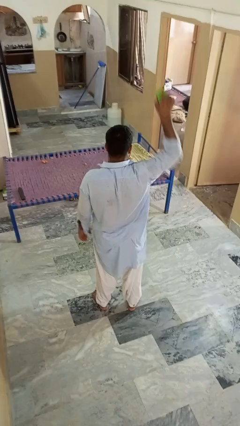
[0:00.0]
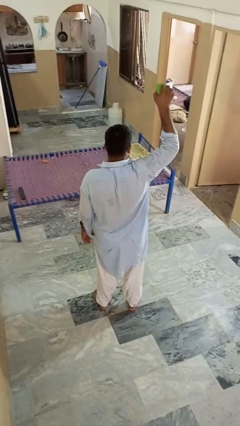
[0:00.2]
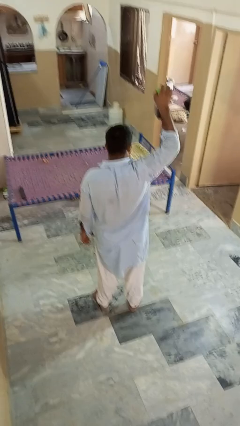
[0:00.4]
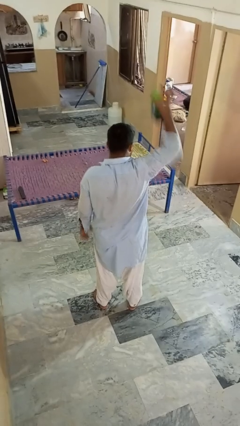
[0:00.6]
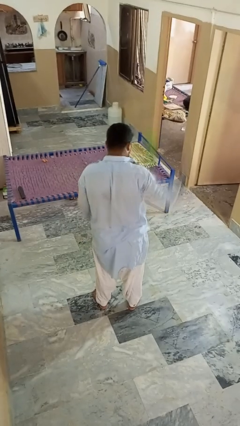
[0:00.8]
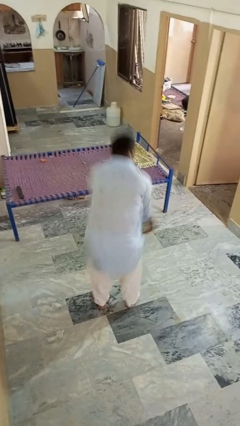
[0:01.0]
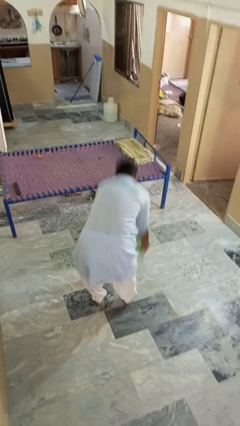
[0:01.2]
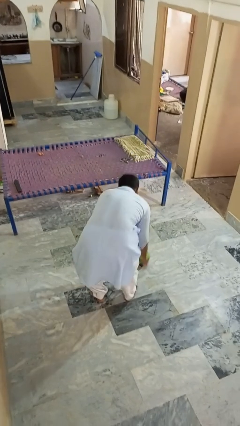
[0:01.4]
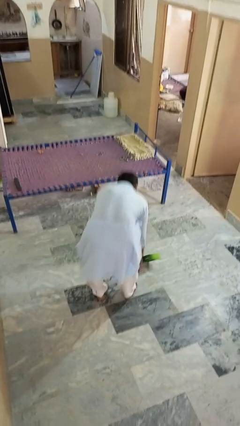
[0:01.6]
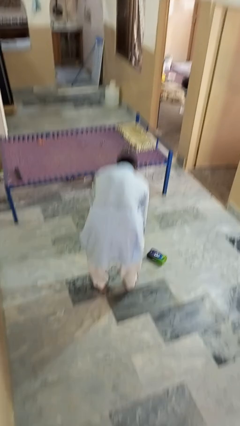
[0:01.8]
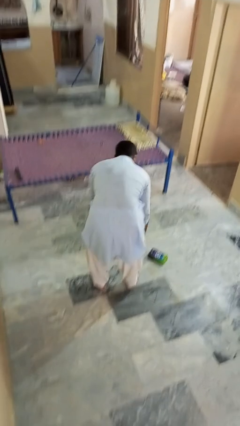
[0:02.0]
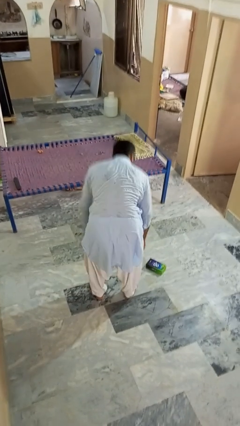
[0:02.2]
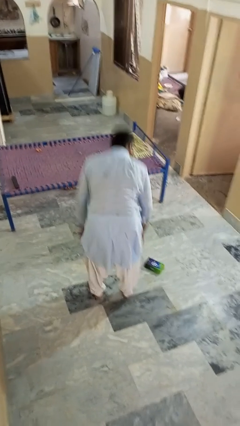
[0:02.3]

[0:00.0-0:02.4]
person catches dropped object

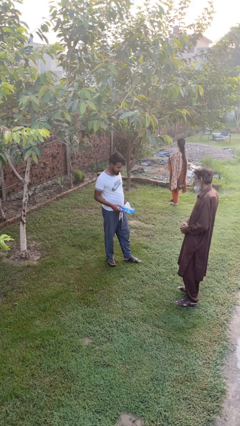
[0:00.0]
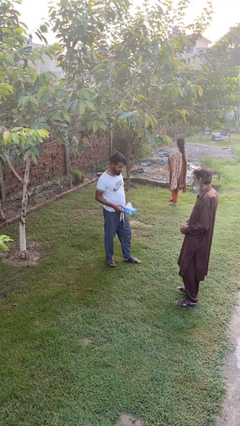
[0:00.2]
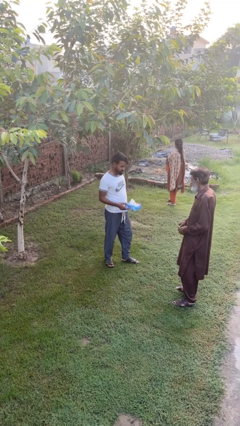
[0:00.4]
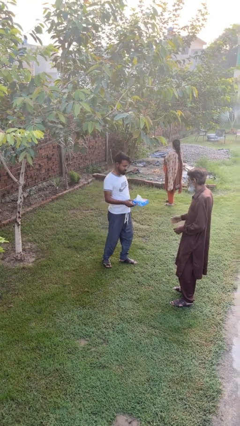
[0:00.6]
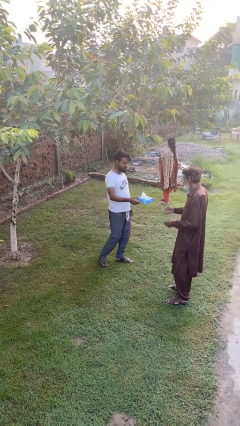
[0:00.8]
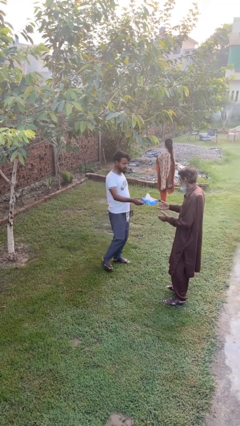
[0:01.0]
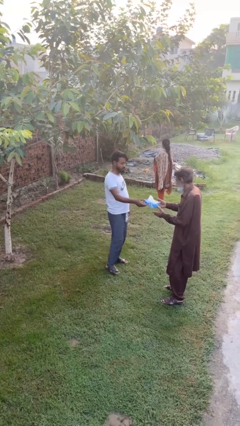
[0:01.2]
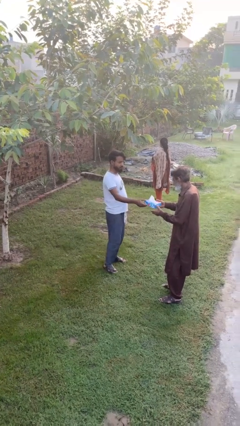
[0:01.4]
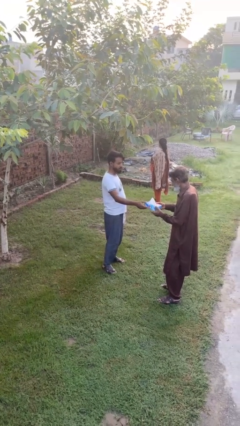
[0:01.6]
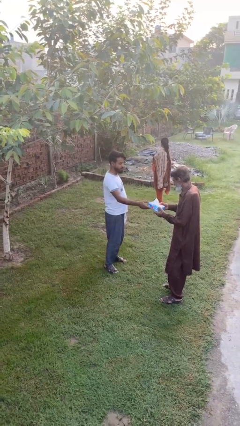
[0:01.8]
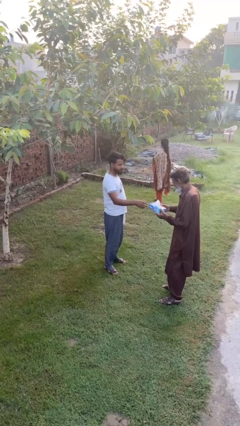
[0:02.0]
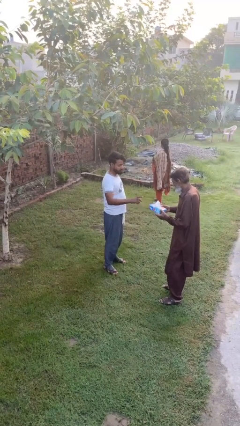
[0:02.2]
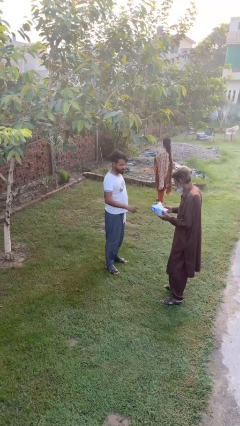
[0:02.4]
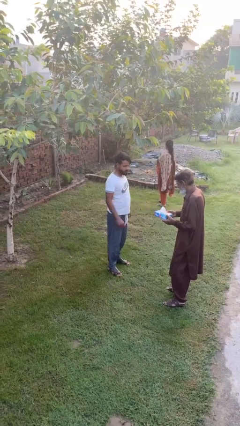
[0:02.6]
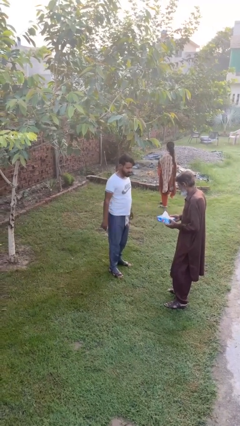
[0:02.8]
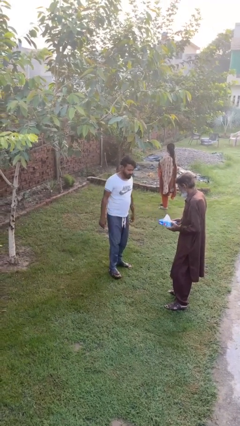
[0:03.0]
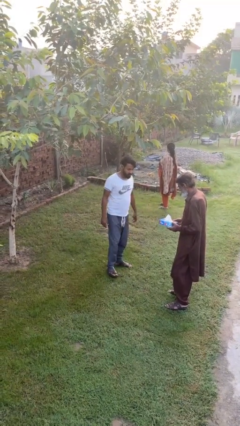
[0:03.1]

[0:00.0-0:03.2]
person transfers object to person

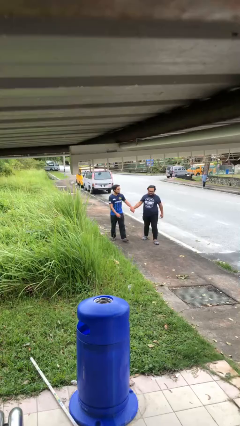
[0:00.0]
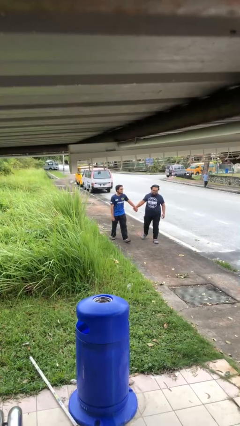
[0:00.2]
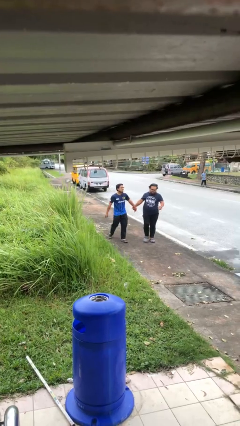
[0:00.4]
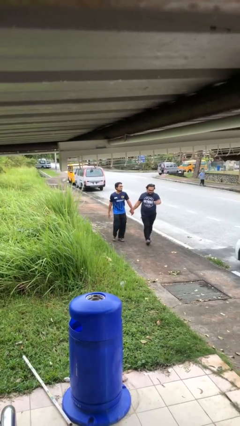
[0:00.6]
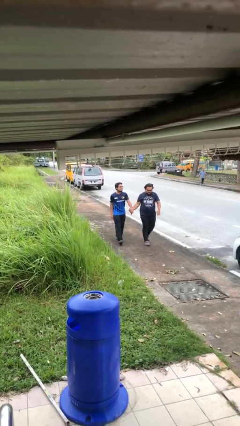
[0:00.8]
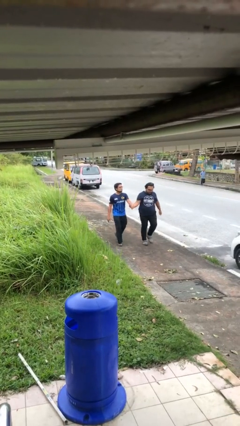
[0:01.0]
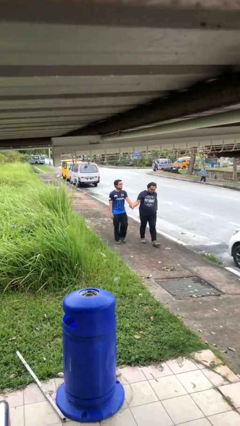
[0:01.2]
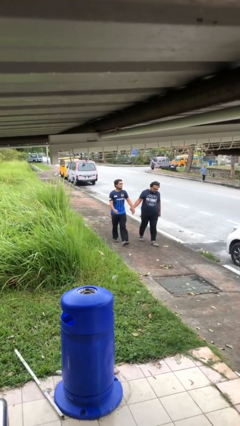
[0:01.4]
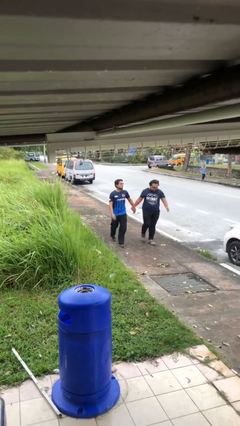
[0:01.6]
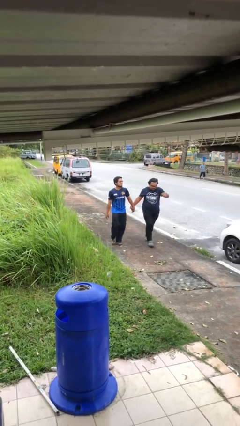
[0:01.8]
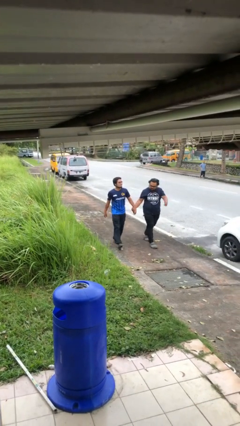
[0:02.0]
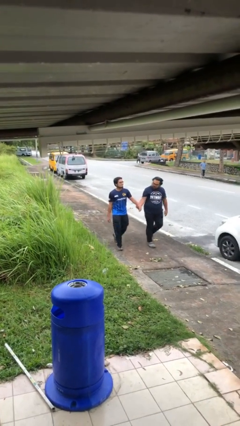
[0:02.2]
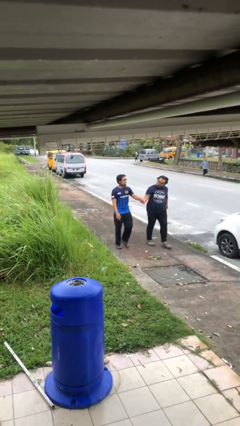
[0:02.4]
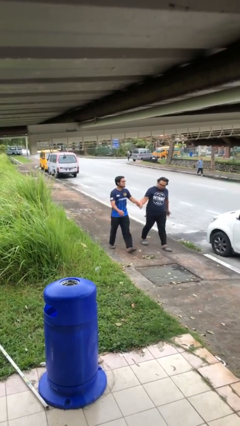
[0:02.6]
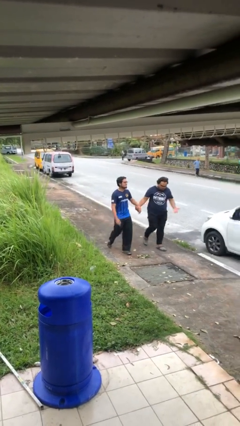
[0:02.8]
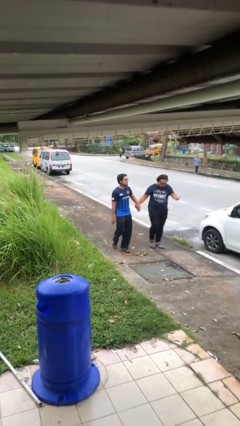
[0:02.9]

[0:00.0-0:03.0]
person holds hand

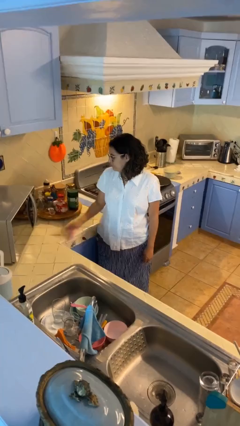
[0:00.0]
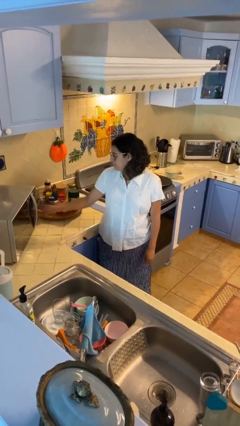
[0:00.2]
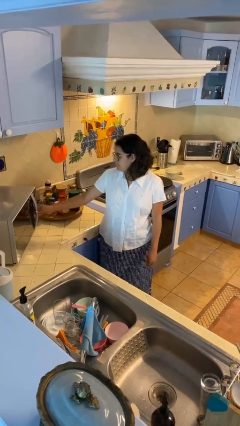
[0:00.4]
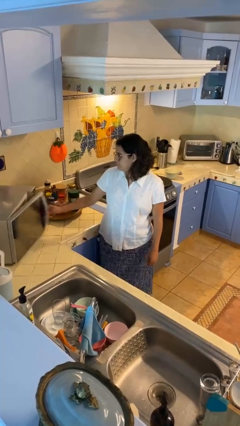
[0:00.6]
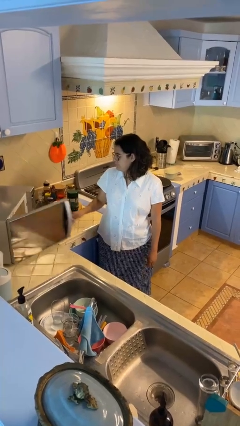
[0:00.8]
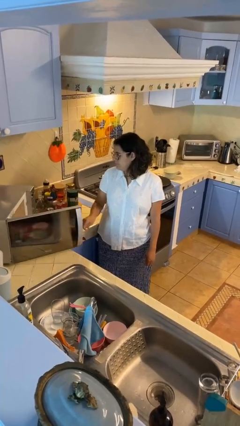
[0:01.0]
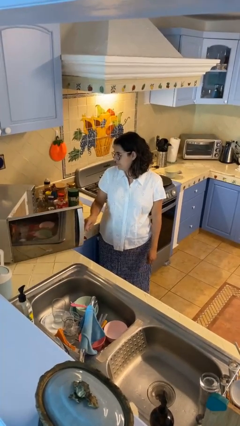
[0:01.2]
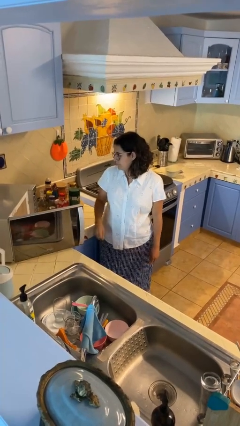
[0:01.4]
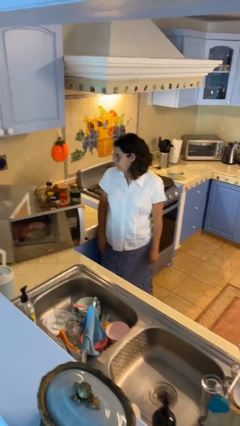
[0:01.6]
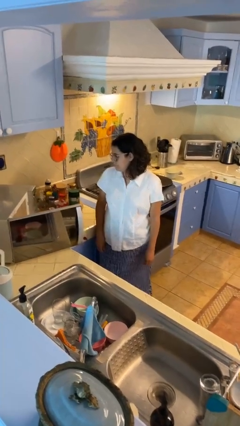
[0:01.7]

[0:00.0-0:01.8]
person opens microwave

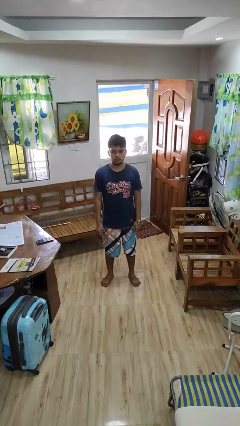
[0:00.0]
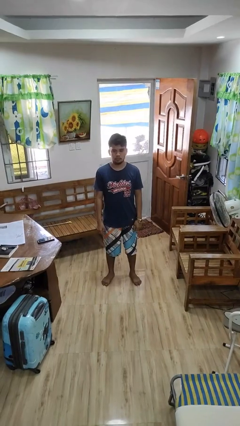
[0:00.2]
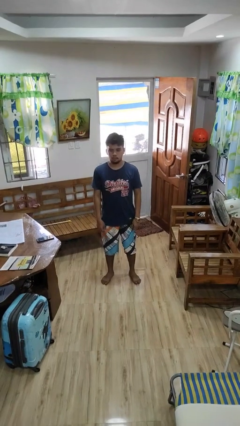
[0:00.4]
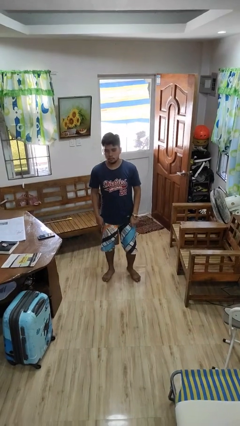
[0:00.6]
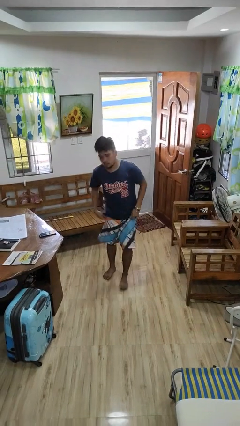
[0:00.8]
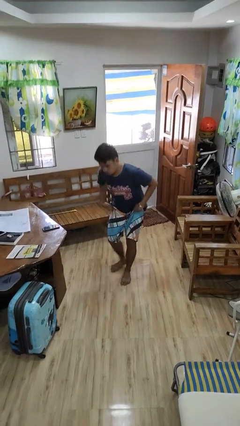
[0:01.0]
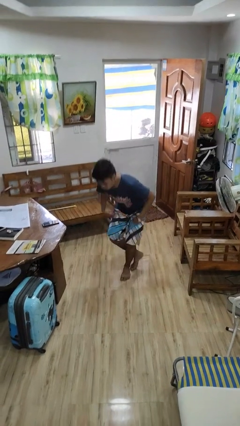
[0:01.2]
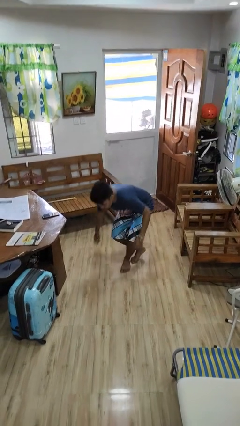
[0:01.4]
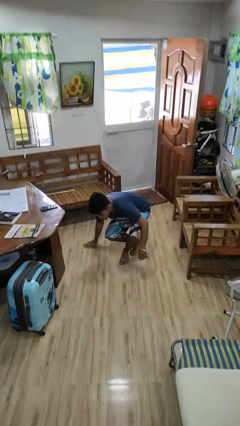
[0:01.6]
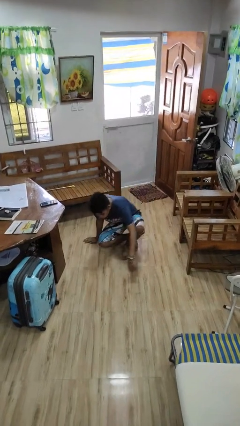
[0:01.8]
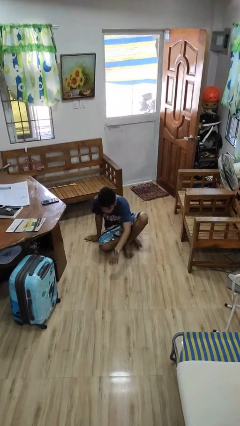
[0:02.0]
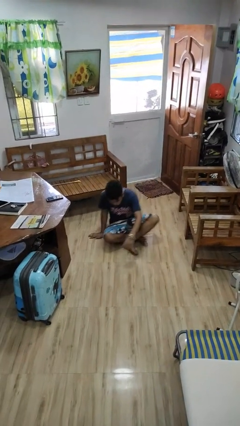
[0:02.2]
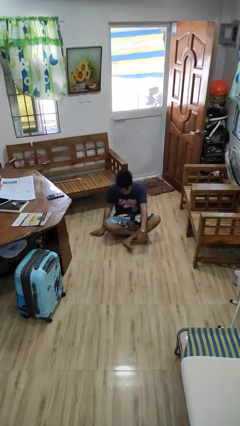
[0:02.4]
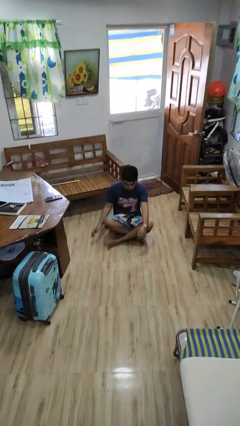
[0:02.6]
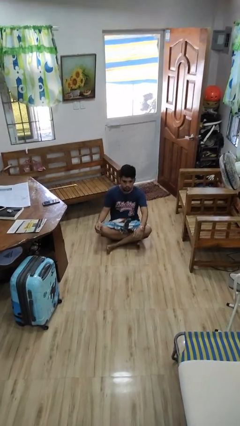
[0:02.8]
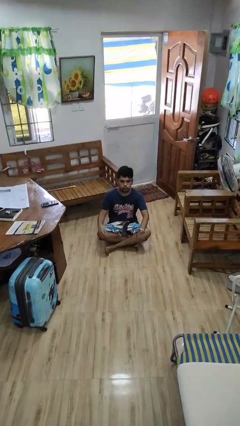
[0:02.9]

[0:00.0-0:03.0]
person sits crisscross

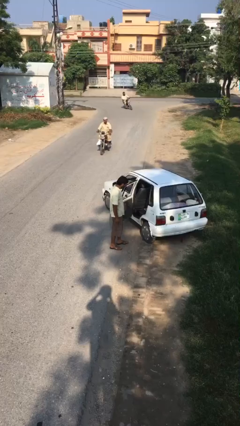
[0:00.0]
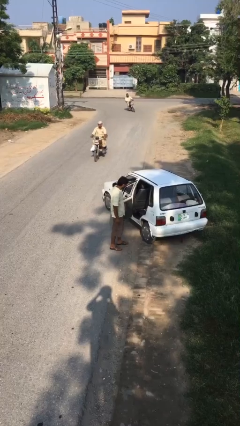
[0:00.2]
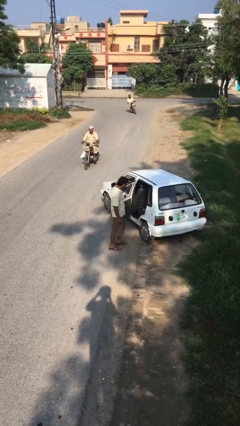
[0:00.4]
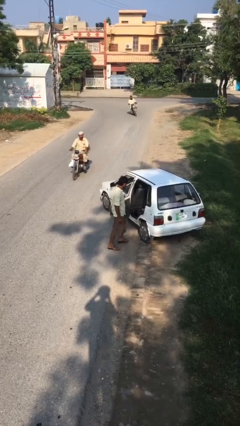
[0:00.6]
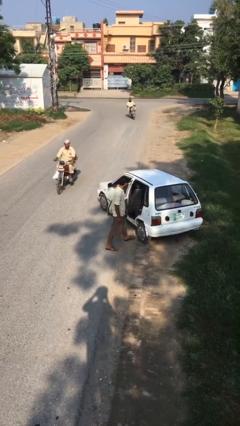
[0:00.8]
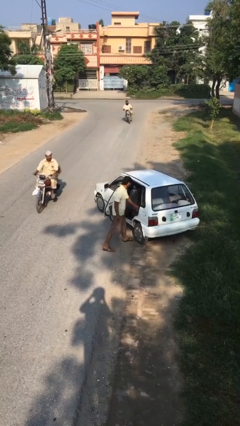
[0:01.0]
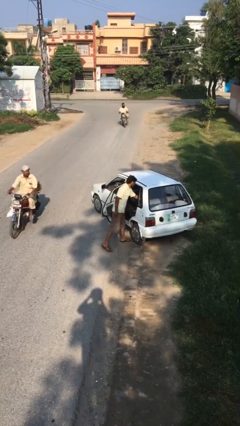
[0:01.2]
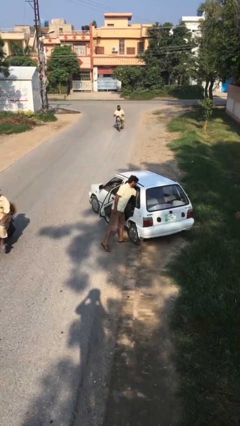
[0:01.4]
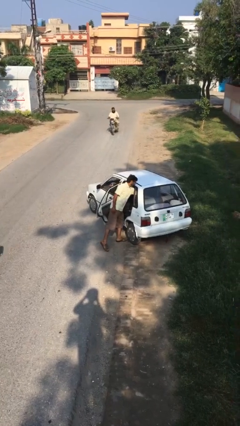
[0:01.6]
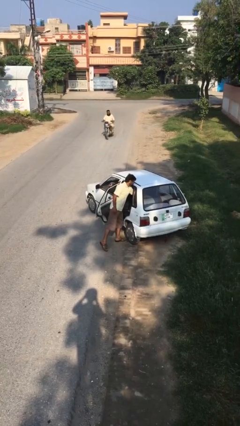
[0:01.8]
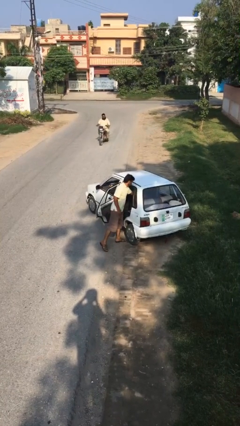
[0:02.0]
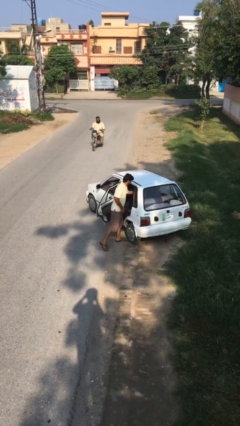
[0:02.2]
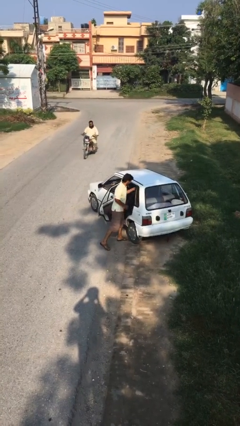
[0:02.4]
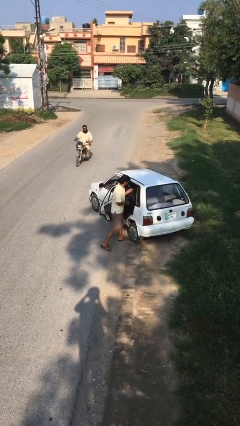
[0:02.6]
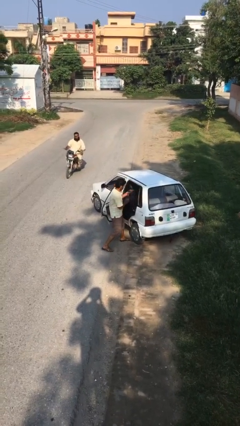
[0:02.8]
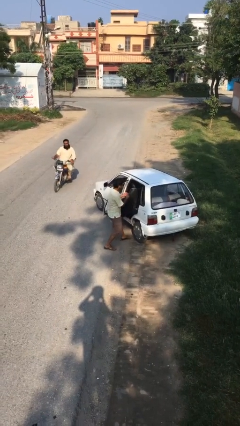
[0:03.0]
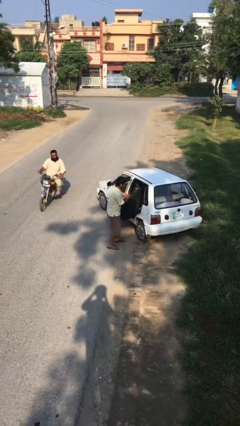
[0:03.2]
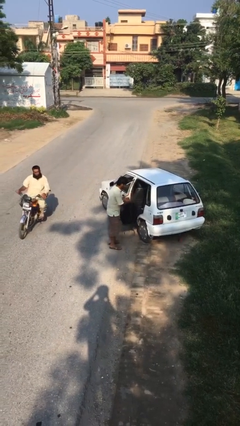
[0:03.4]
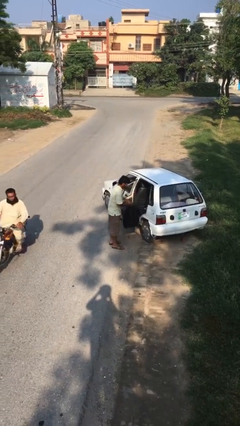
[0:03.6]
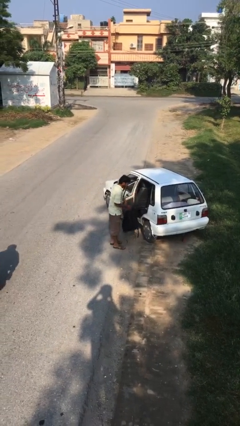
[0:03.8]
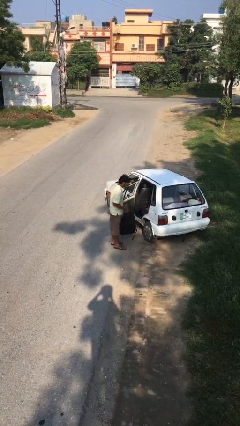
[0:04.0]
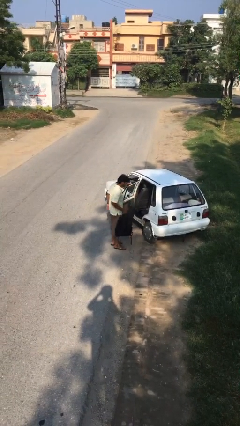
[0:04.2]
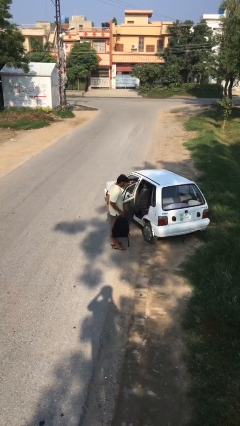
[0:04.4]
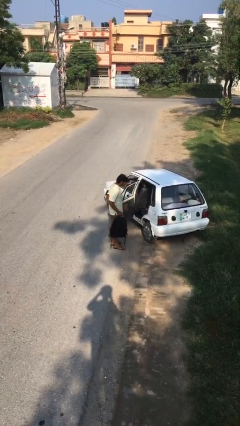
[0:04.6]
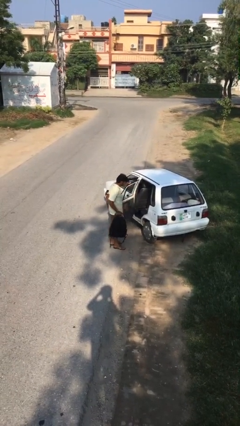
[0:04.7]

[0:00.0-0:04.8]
person unloads car
